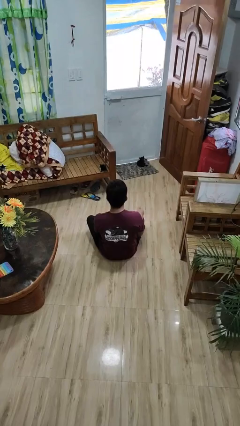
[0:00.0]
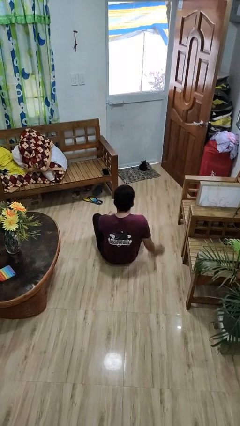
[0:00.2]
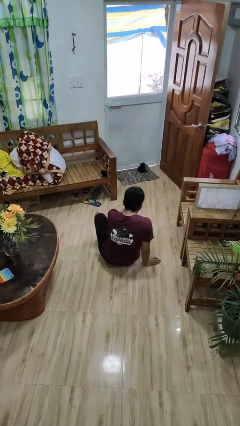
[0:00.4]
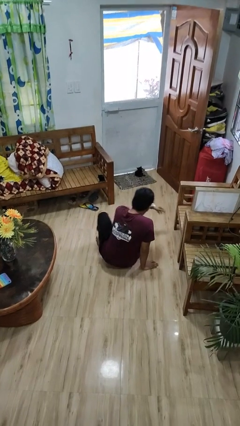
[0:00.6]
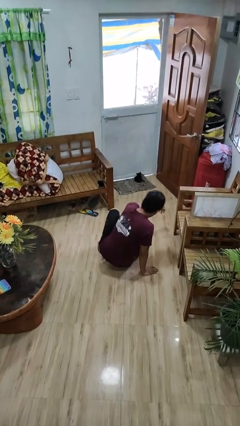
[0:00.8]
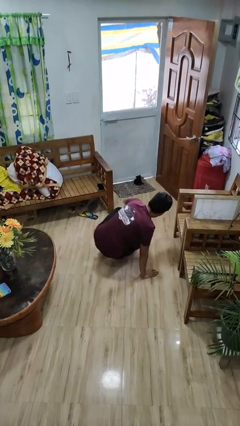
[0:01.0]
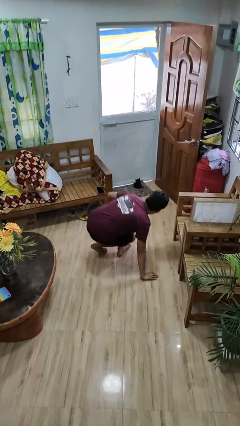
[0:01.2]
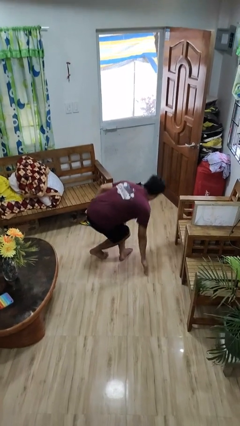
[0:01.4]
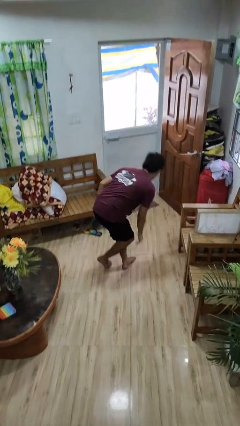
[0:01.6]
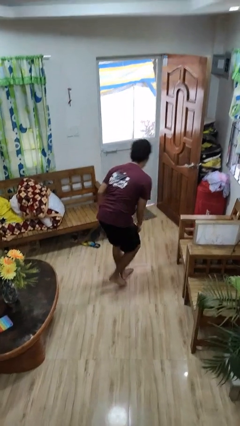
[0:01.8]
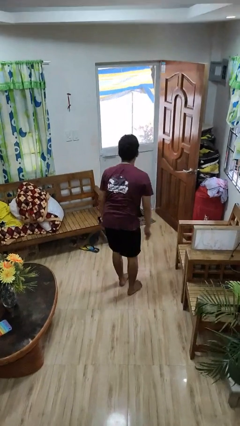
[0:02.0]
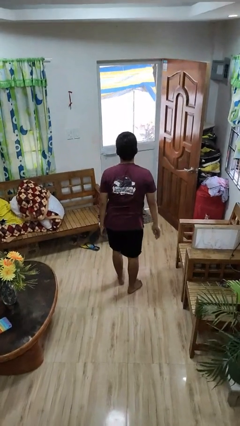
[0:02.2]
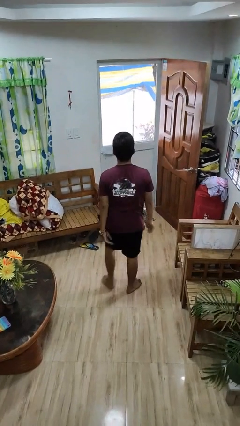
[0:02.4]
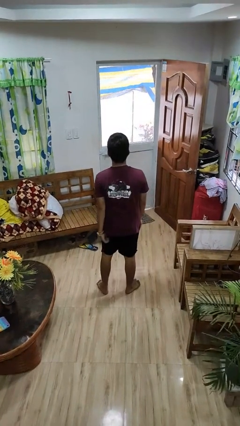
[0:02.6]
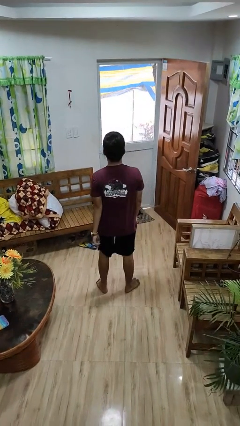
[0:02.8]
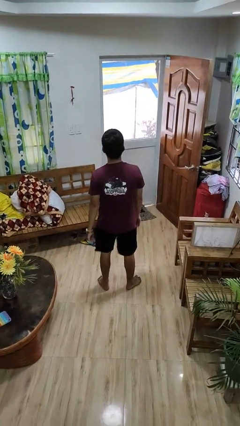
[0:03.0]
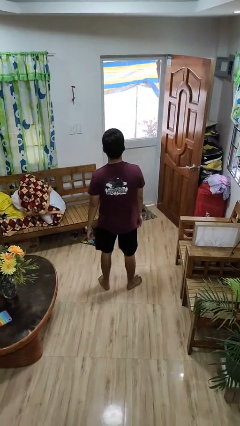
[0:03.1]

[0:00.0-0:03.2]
person stands up from floor

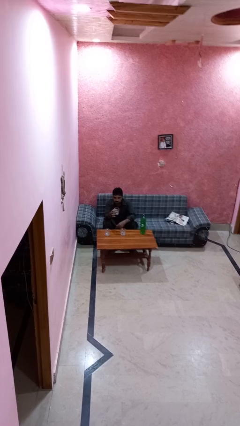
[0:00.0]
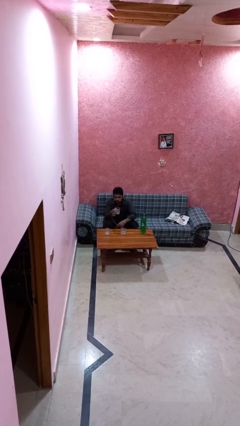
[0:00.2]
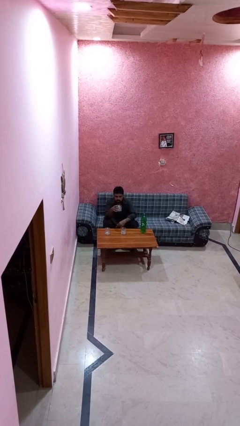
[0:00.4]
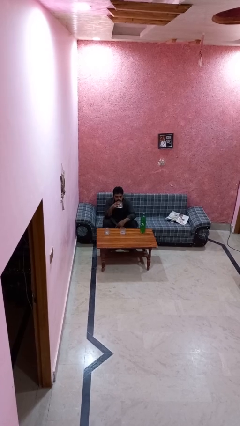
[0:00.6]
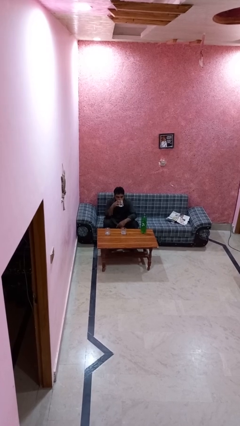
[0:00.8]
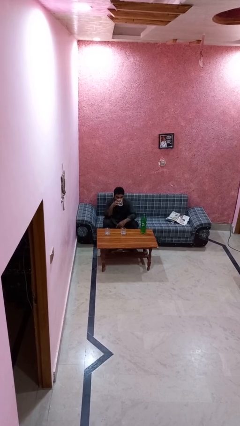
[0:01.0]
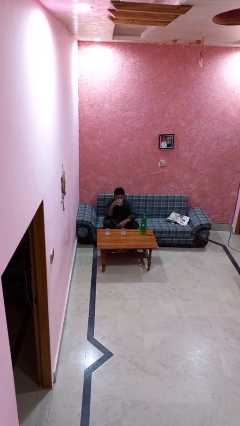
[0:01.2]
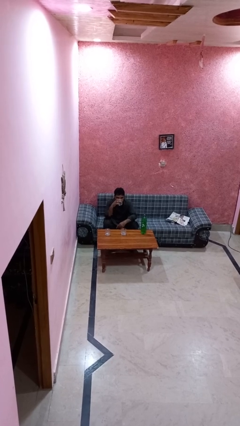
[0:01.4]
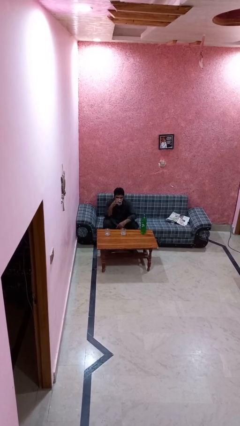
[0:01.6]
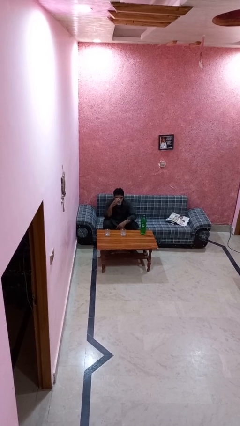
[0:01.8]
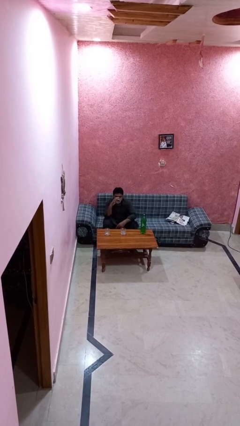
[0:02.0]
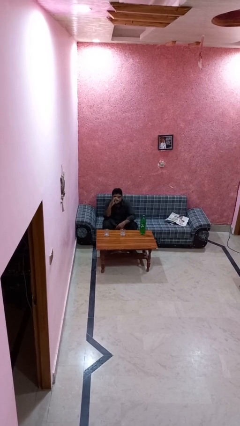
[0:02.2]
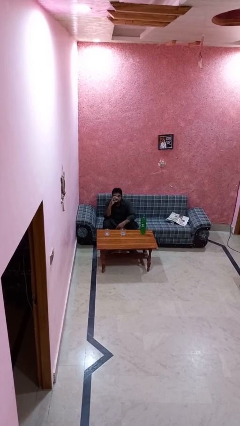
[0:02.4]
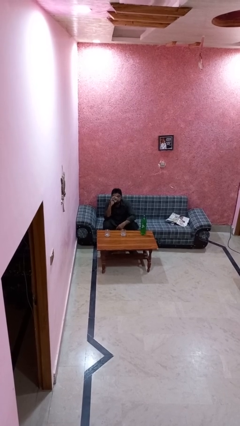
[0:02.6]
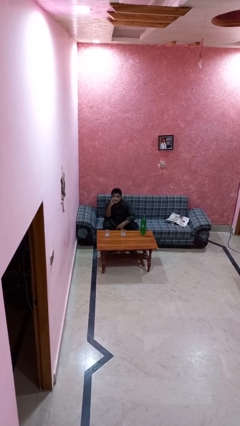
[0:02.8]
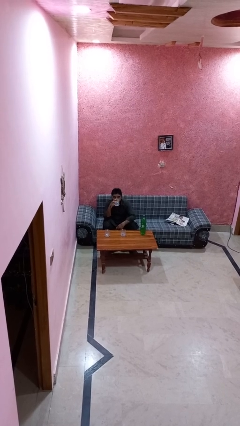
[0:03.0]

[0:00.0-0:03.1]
person drinks from shotglass

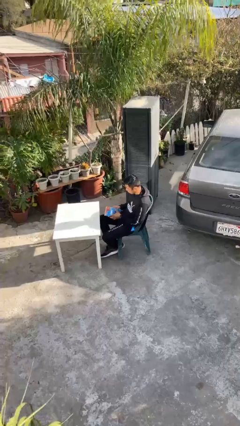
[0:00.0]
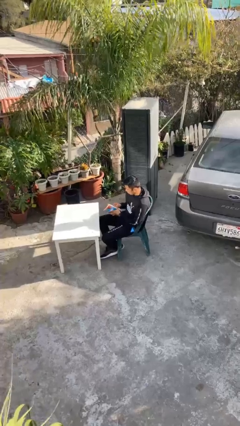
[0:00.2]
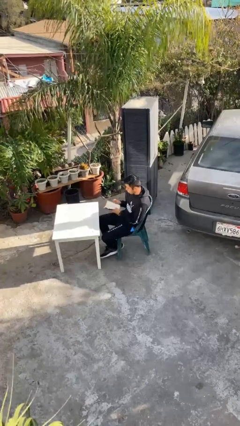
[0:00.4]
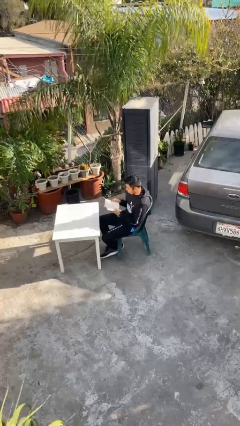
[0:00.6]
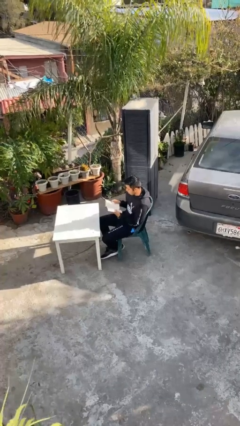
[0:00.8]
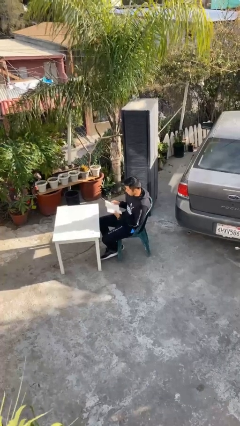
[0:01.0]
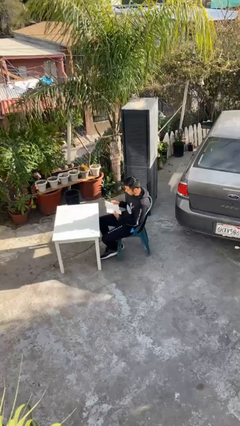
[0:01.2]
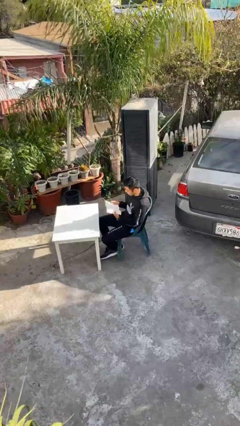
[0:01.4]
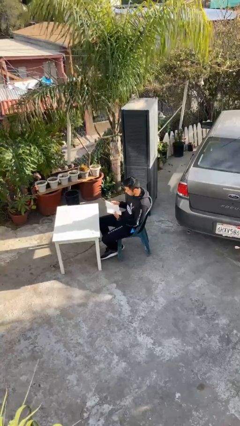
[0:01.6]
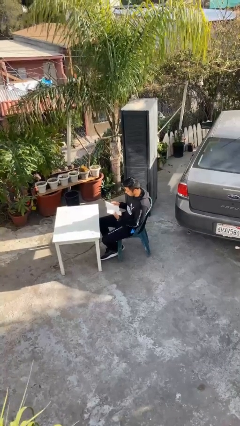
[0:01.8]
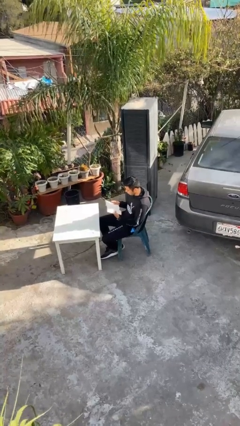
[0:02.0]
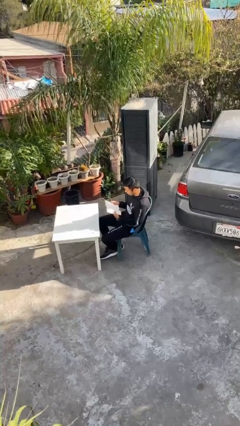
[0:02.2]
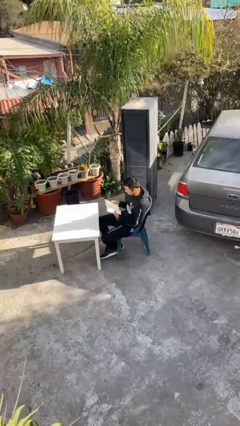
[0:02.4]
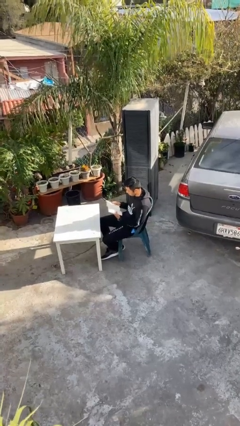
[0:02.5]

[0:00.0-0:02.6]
person reads document

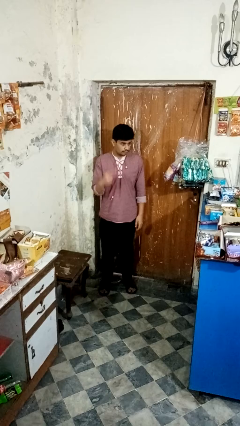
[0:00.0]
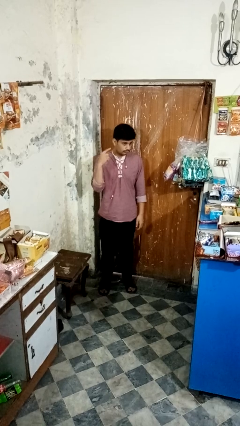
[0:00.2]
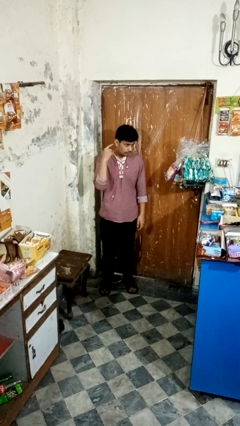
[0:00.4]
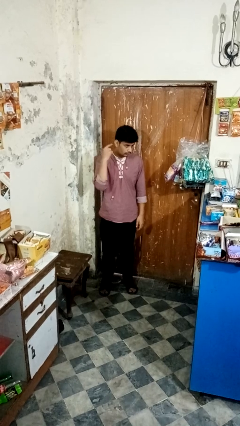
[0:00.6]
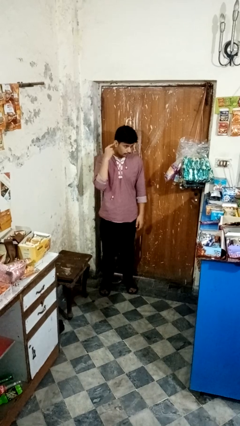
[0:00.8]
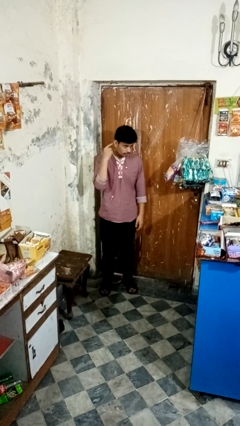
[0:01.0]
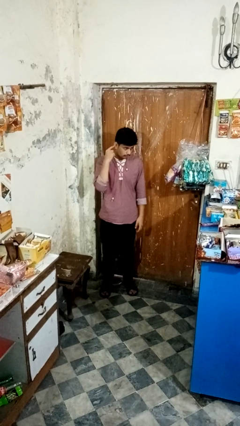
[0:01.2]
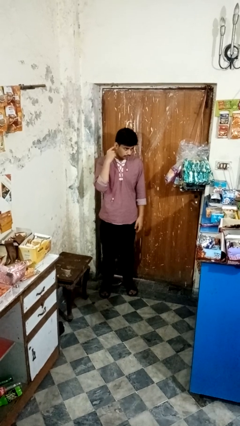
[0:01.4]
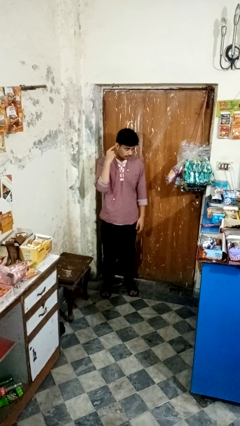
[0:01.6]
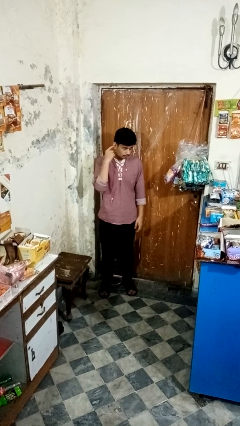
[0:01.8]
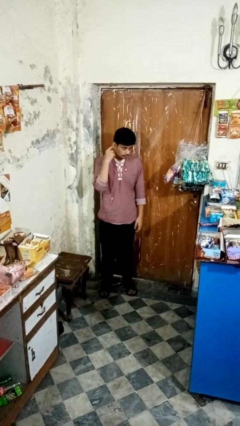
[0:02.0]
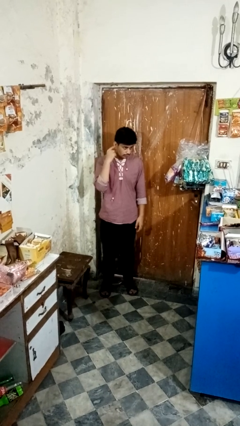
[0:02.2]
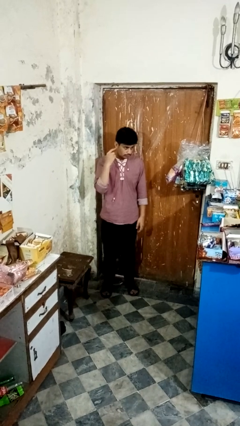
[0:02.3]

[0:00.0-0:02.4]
person gestures listen closely

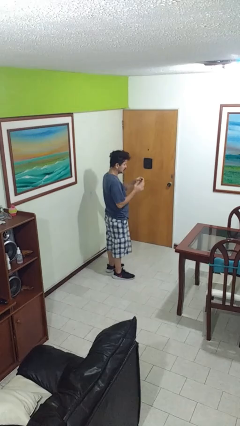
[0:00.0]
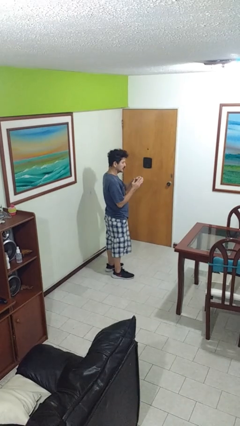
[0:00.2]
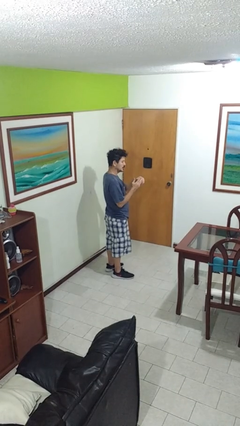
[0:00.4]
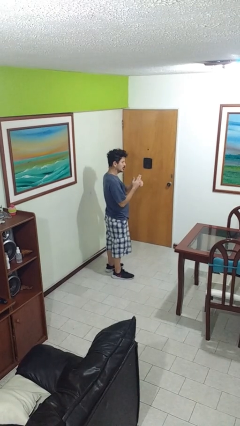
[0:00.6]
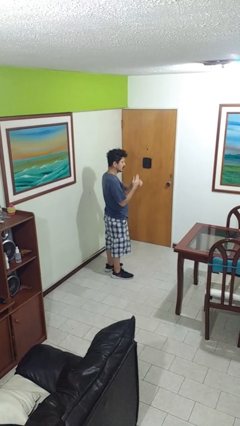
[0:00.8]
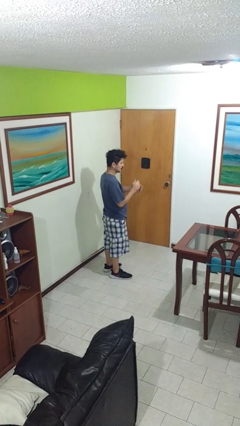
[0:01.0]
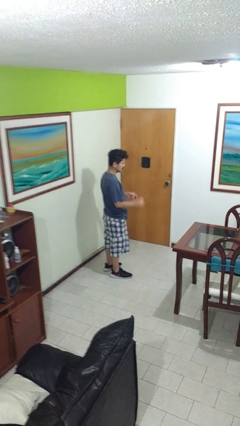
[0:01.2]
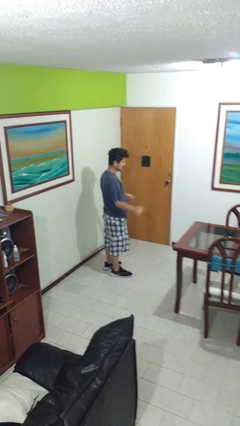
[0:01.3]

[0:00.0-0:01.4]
person puts on ring

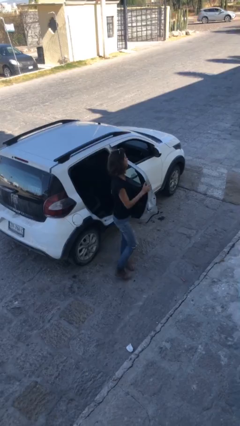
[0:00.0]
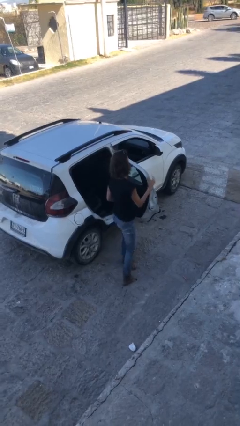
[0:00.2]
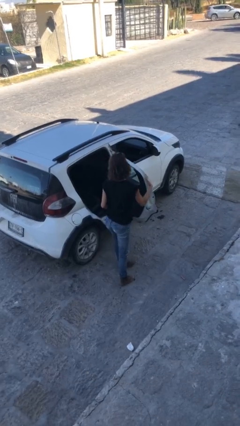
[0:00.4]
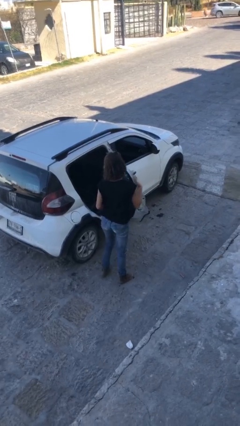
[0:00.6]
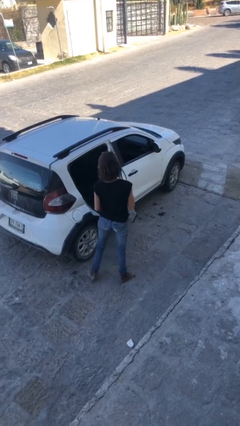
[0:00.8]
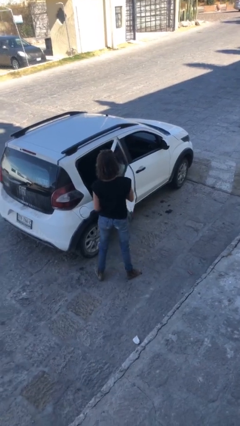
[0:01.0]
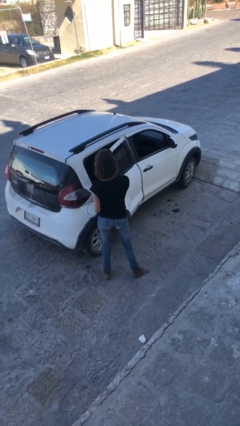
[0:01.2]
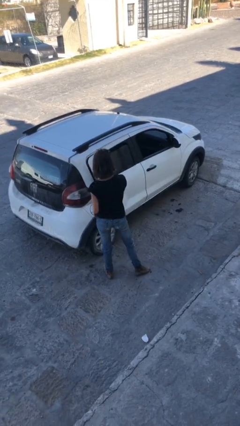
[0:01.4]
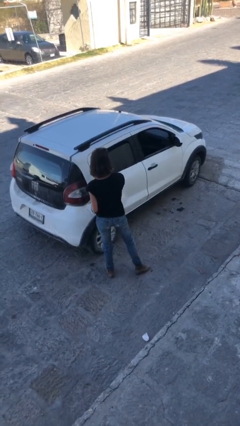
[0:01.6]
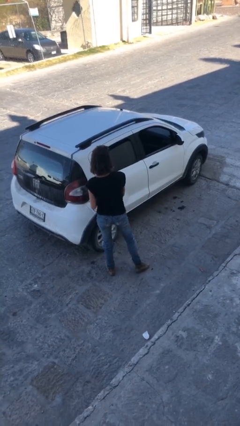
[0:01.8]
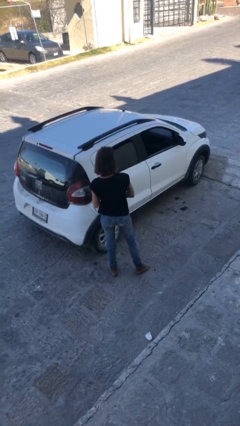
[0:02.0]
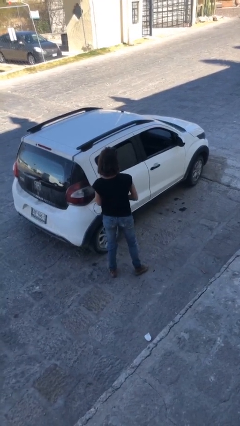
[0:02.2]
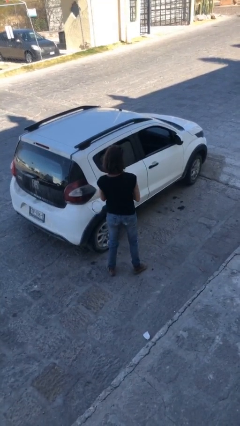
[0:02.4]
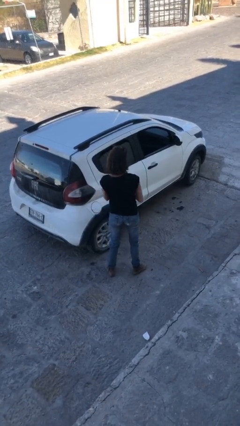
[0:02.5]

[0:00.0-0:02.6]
person closes car door

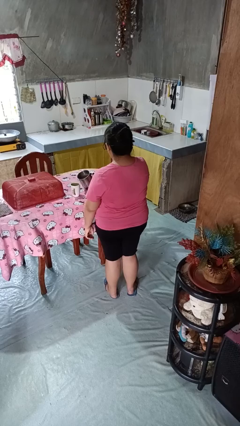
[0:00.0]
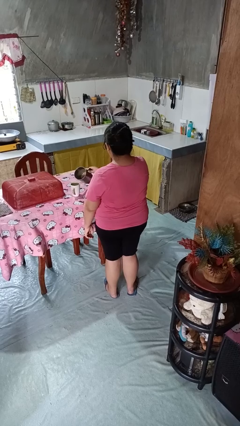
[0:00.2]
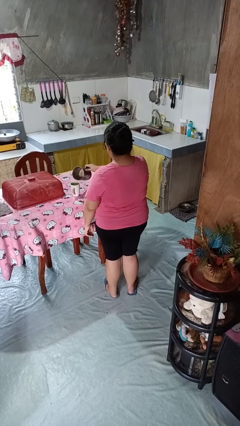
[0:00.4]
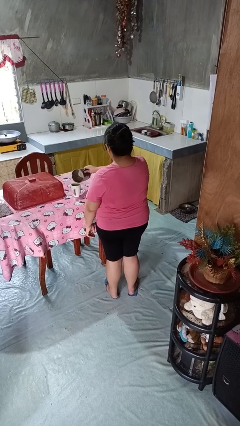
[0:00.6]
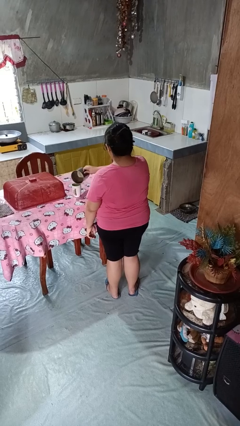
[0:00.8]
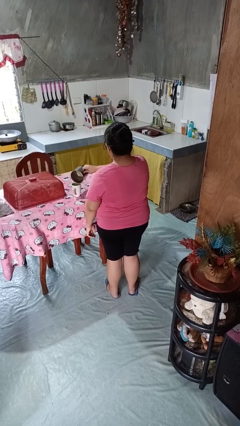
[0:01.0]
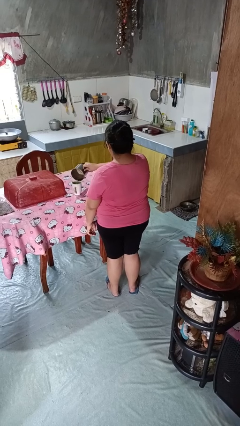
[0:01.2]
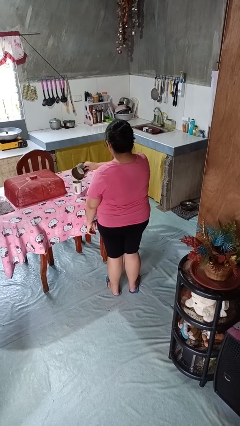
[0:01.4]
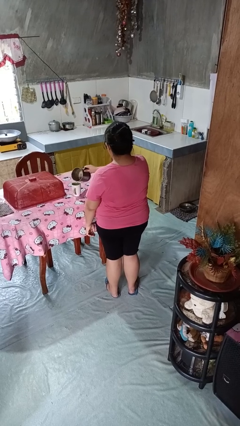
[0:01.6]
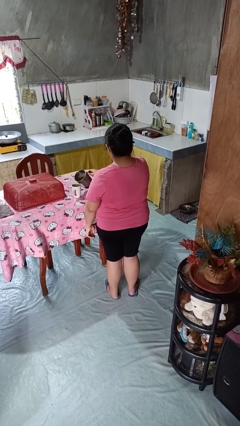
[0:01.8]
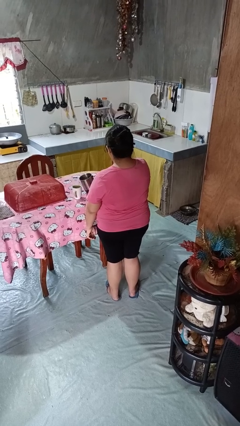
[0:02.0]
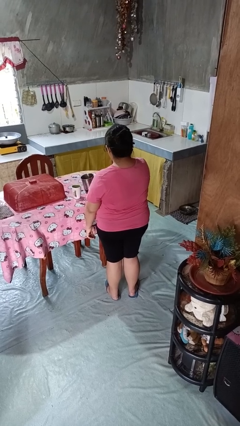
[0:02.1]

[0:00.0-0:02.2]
person pours coffee into mug
